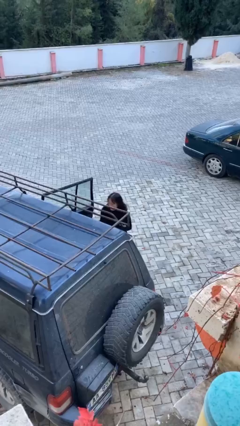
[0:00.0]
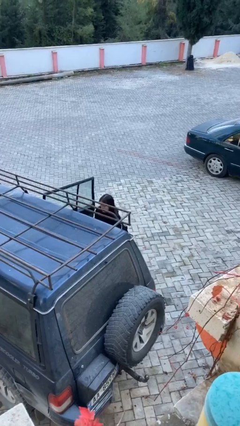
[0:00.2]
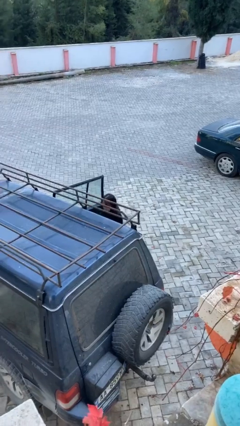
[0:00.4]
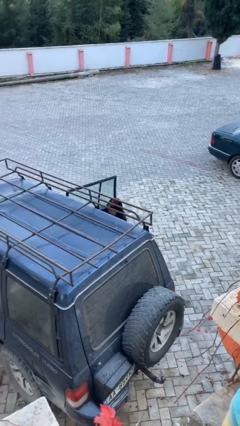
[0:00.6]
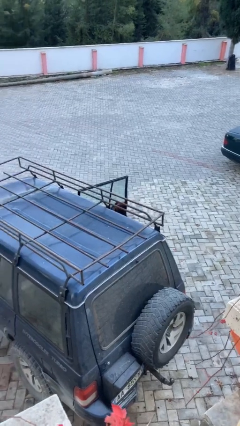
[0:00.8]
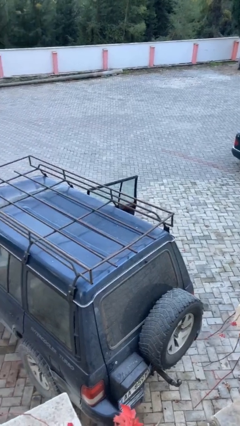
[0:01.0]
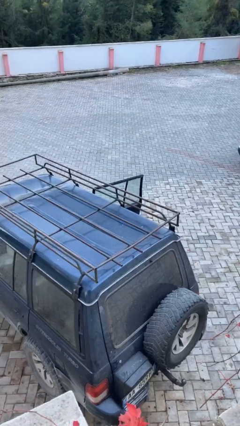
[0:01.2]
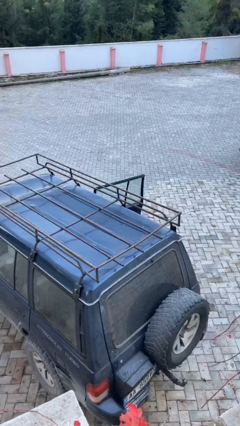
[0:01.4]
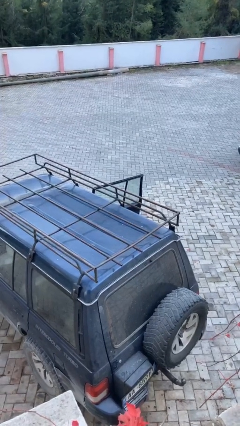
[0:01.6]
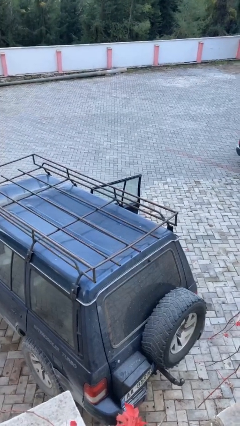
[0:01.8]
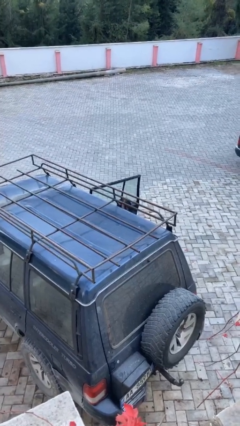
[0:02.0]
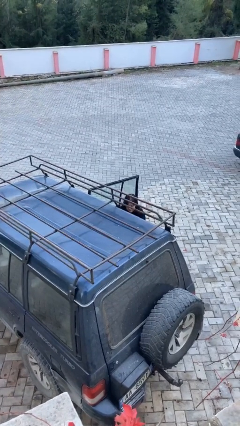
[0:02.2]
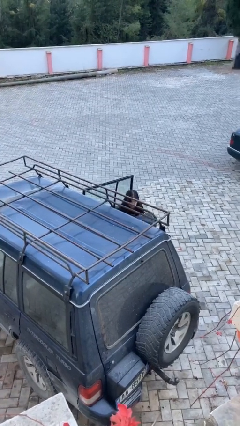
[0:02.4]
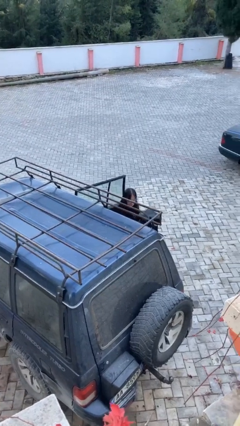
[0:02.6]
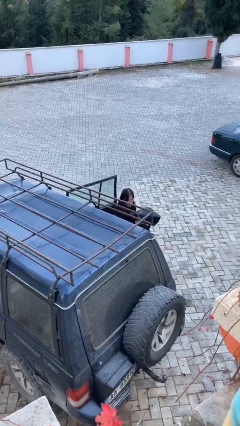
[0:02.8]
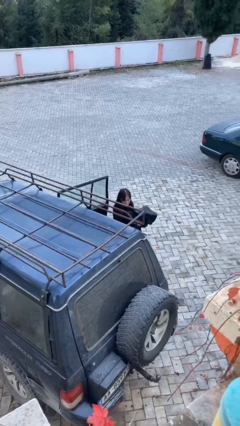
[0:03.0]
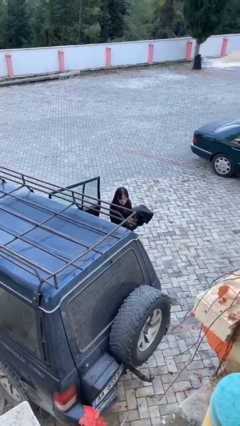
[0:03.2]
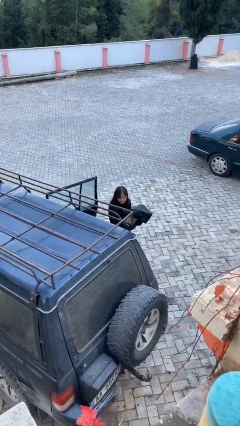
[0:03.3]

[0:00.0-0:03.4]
person unloads car

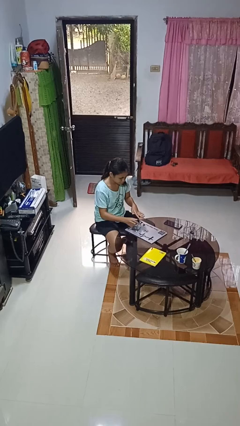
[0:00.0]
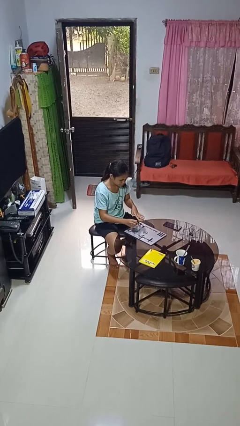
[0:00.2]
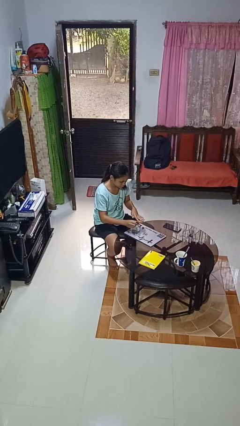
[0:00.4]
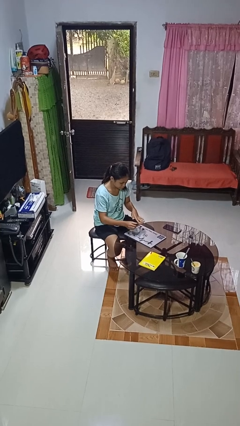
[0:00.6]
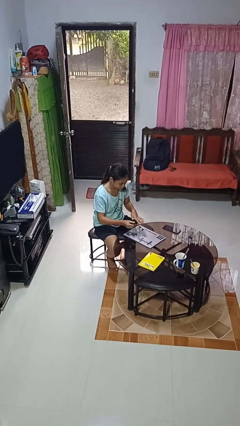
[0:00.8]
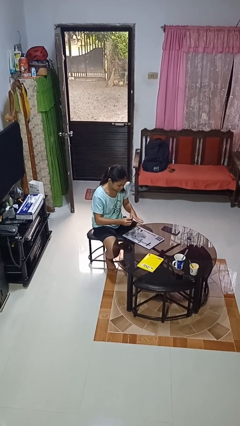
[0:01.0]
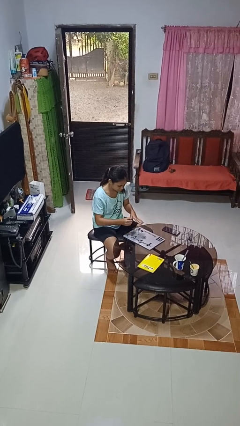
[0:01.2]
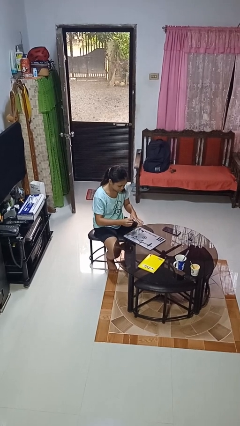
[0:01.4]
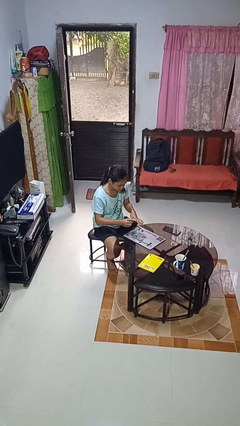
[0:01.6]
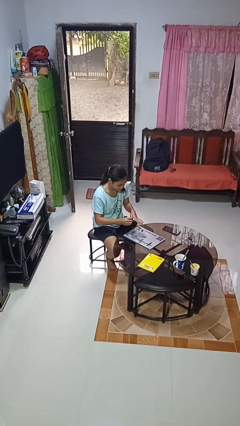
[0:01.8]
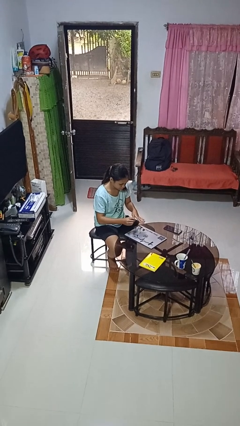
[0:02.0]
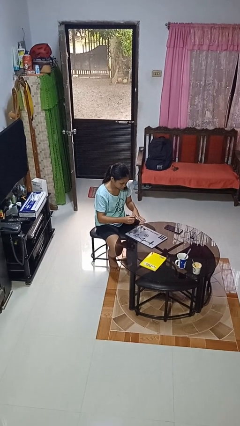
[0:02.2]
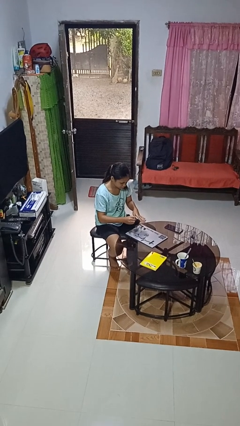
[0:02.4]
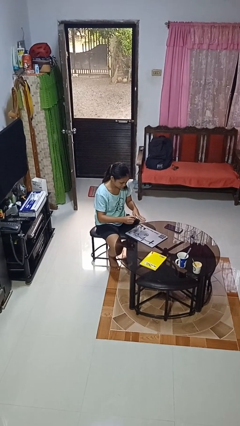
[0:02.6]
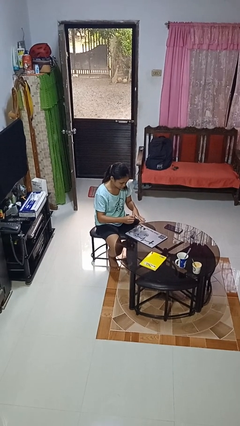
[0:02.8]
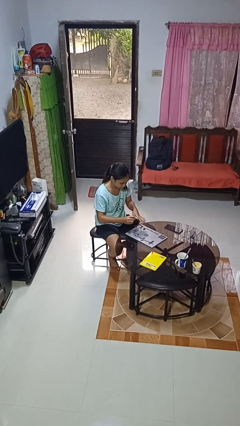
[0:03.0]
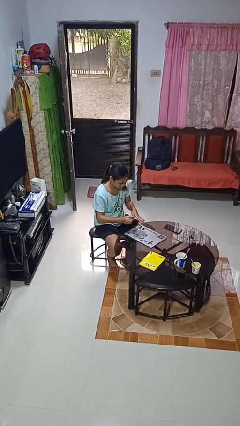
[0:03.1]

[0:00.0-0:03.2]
person paints fingernails

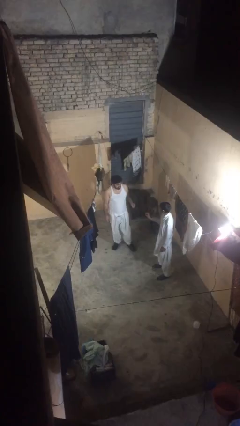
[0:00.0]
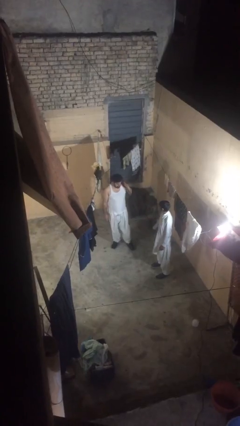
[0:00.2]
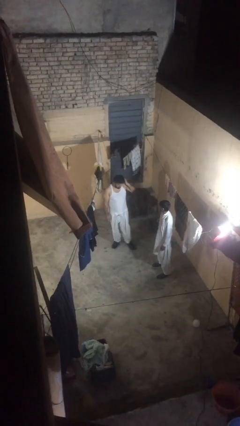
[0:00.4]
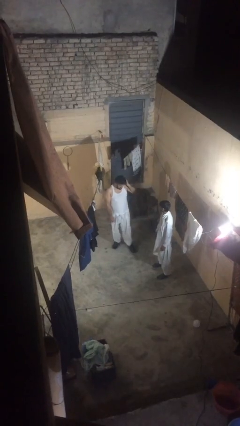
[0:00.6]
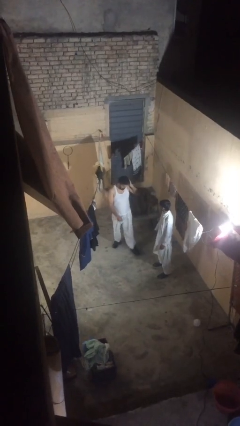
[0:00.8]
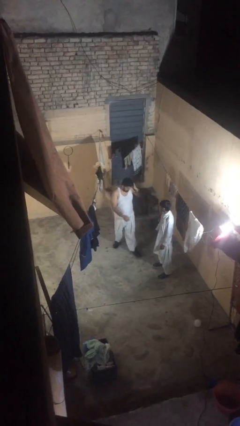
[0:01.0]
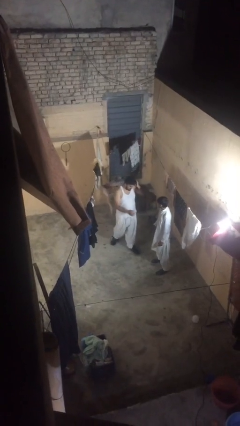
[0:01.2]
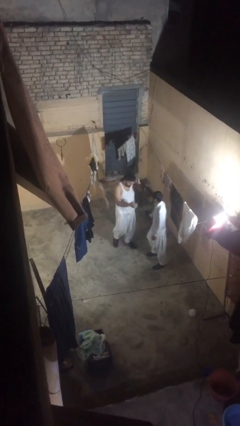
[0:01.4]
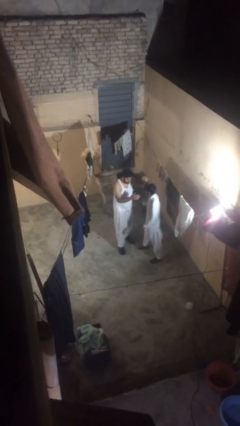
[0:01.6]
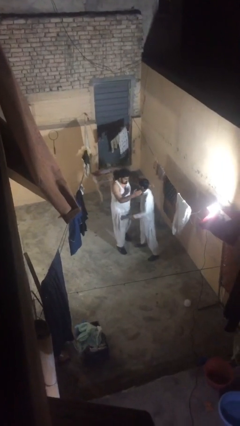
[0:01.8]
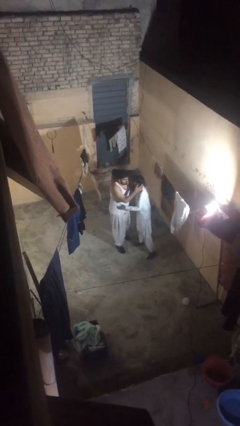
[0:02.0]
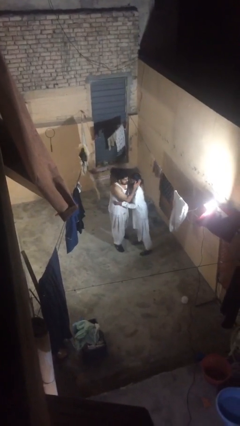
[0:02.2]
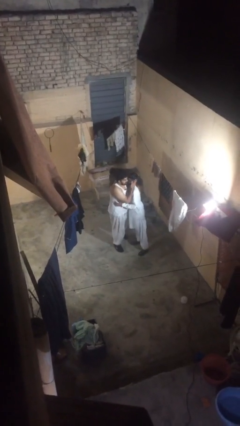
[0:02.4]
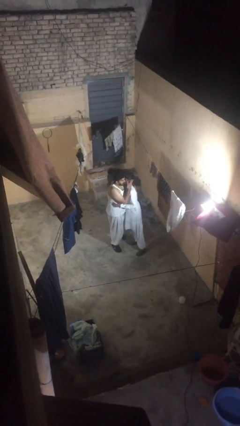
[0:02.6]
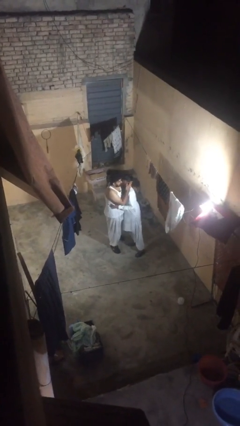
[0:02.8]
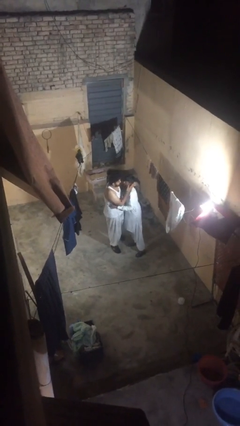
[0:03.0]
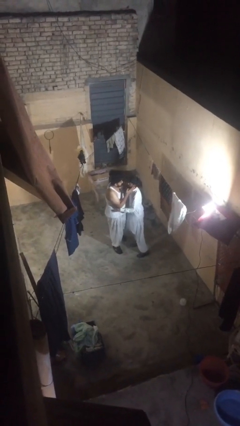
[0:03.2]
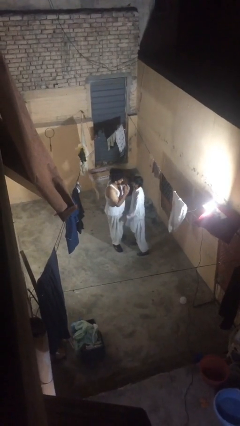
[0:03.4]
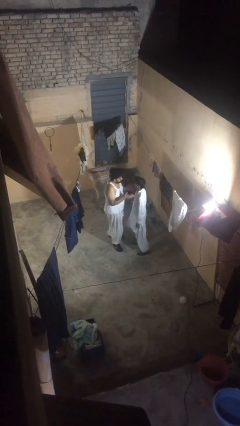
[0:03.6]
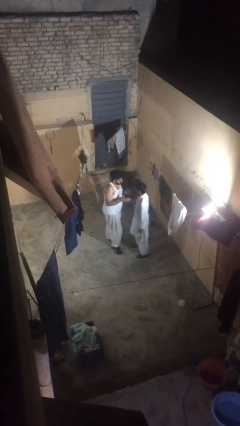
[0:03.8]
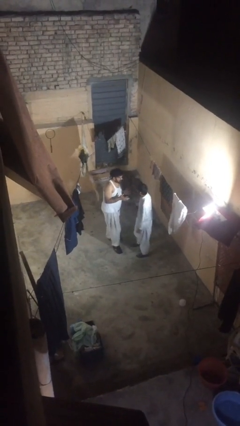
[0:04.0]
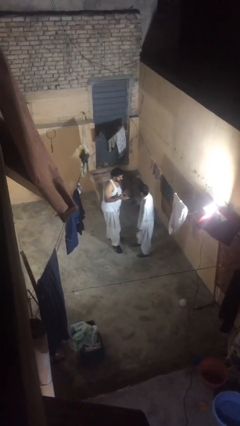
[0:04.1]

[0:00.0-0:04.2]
person embraces person

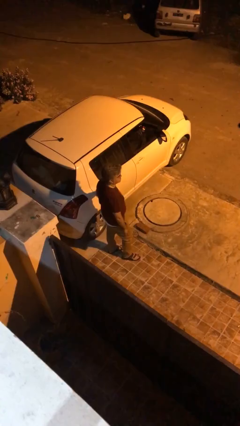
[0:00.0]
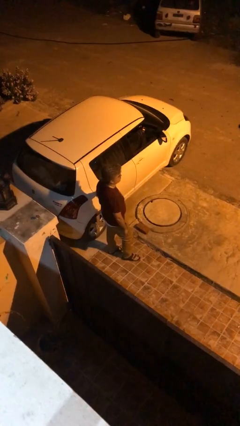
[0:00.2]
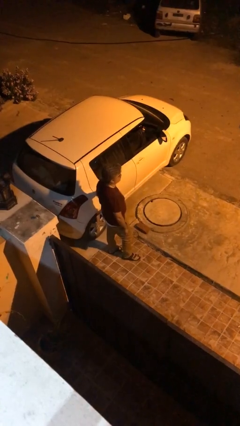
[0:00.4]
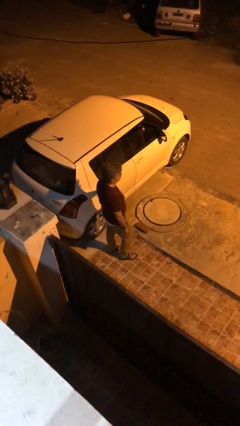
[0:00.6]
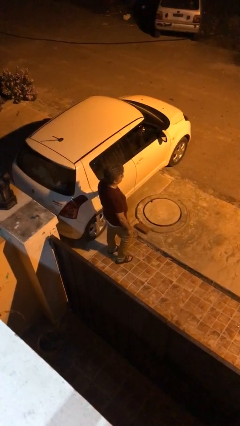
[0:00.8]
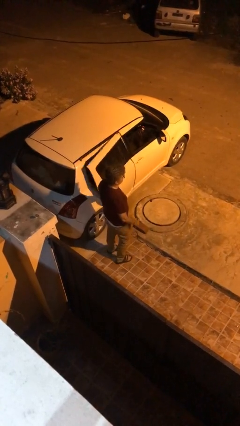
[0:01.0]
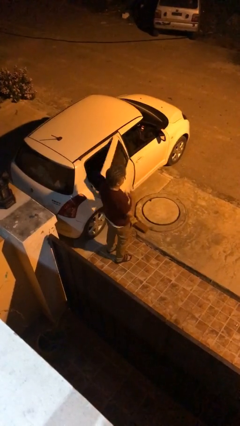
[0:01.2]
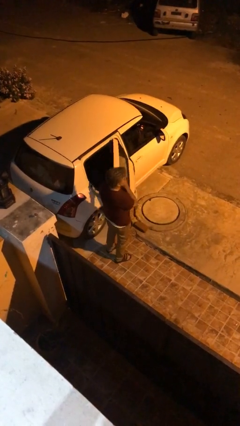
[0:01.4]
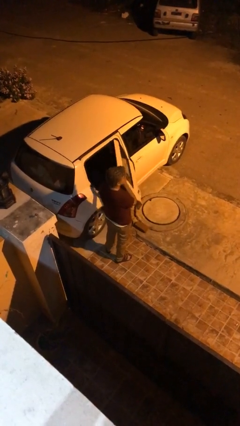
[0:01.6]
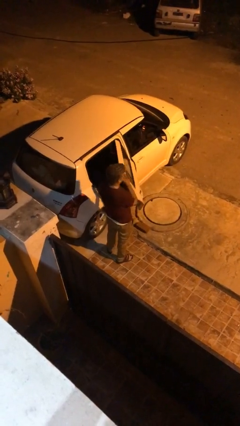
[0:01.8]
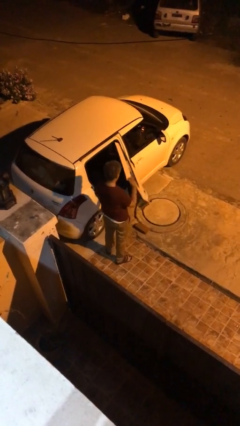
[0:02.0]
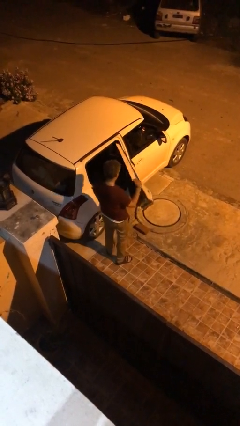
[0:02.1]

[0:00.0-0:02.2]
person opens car door

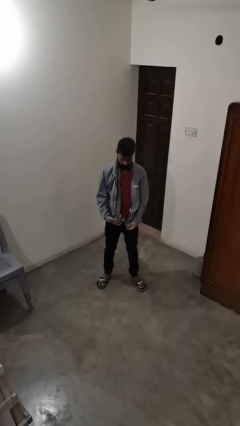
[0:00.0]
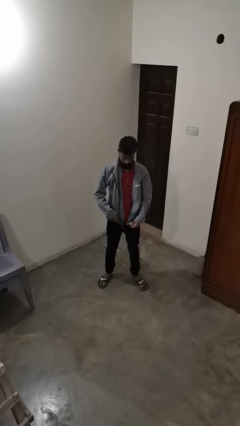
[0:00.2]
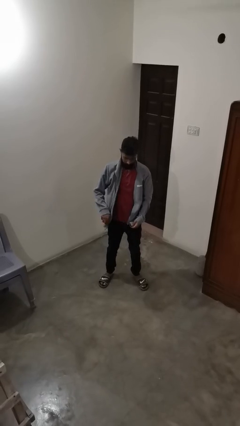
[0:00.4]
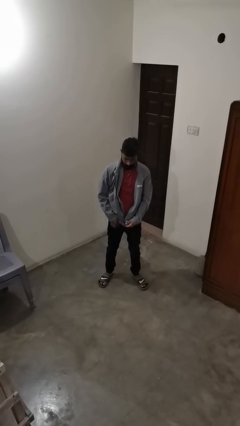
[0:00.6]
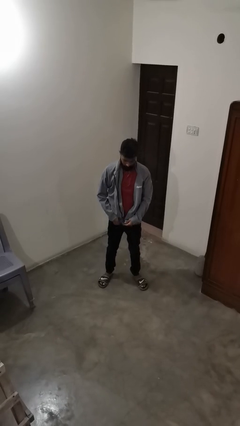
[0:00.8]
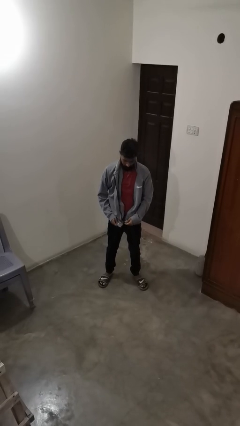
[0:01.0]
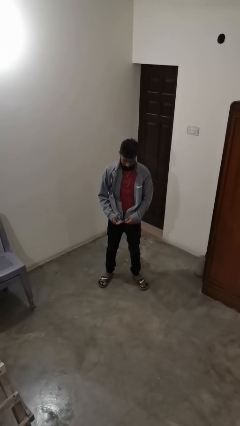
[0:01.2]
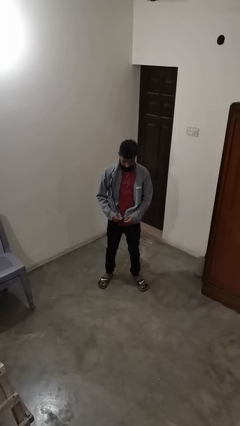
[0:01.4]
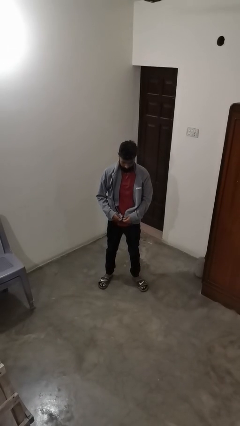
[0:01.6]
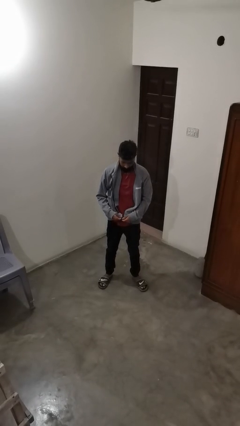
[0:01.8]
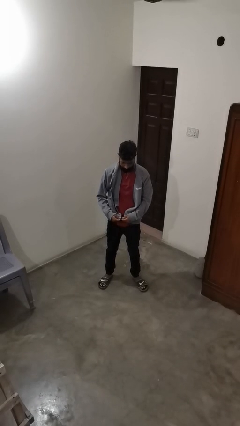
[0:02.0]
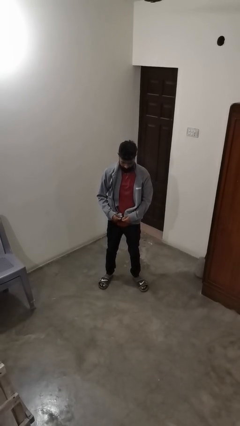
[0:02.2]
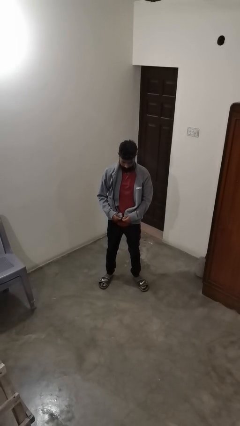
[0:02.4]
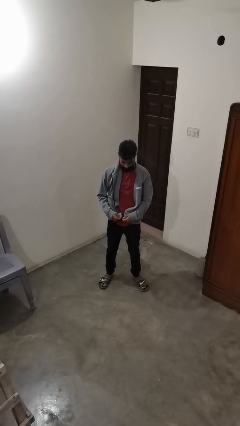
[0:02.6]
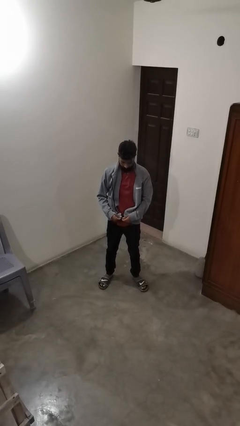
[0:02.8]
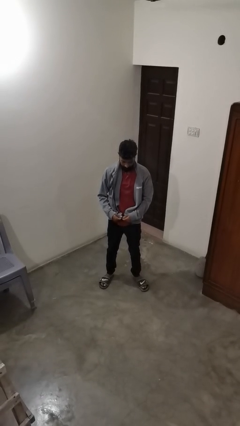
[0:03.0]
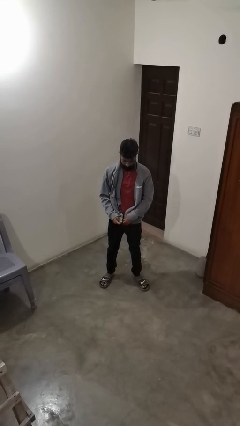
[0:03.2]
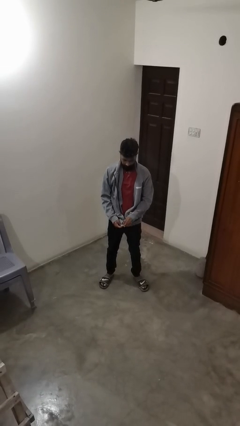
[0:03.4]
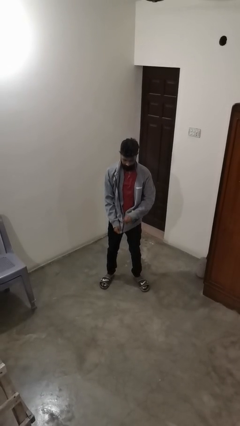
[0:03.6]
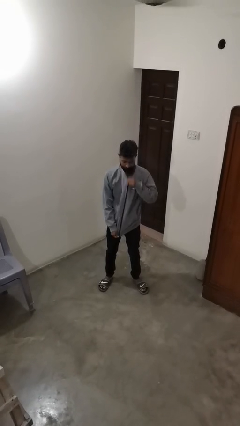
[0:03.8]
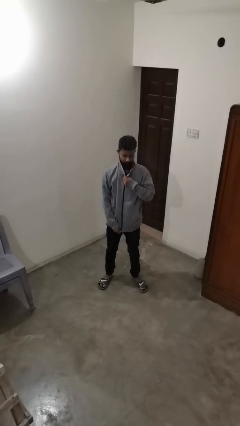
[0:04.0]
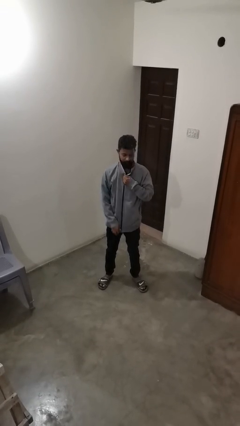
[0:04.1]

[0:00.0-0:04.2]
person zips up jacket
